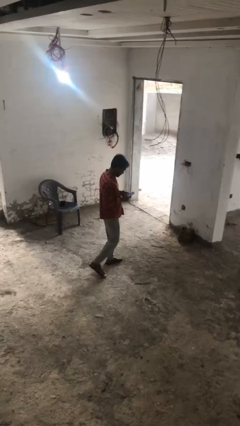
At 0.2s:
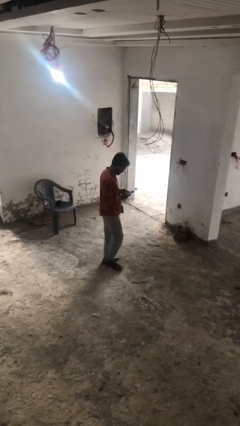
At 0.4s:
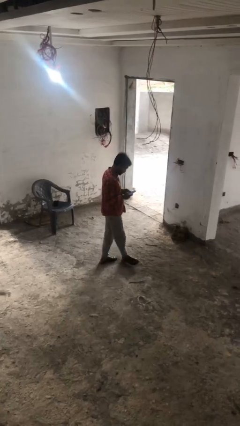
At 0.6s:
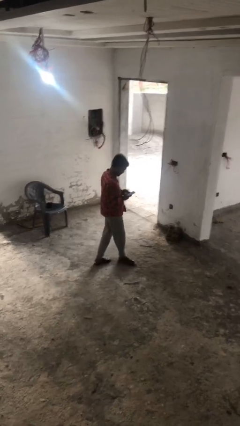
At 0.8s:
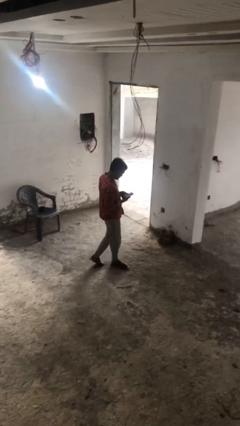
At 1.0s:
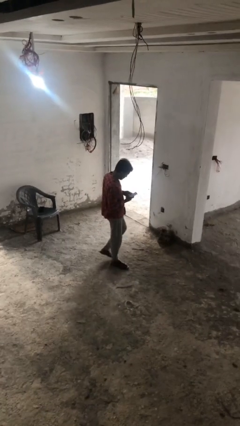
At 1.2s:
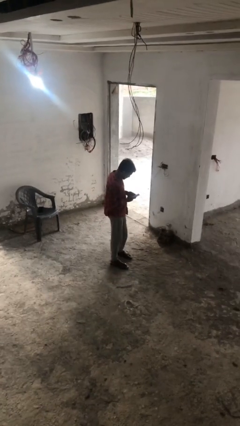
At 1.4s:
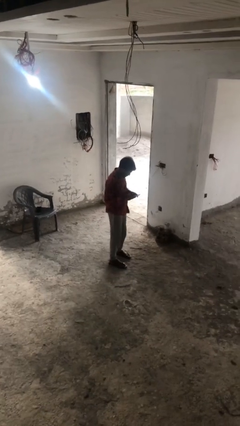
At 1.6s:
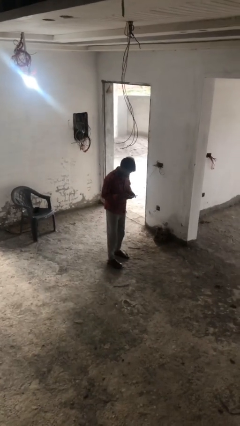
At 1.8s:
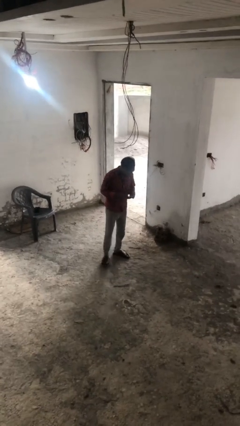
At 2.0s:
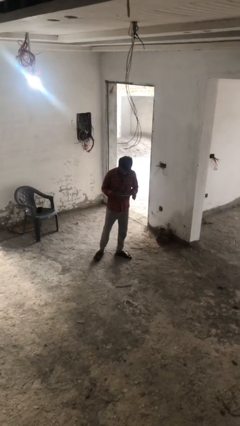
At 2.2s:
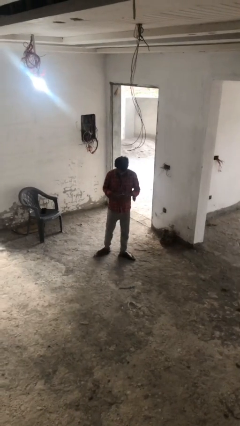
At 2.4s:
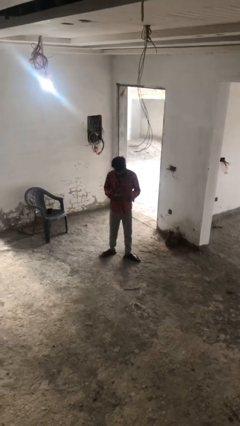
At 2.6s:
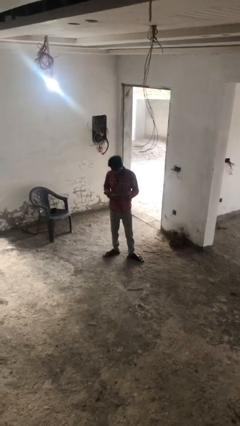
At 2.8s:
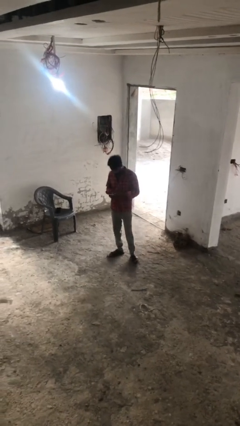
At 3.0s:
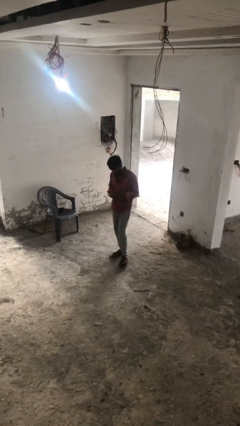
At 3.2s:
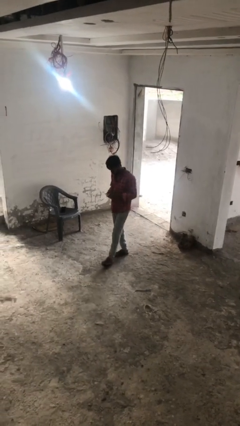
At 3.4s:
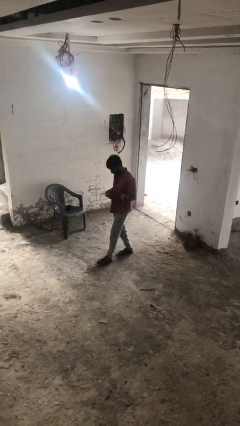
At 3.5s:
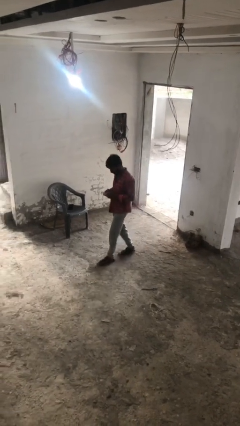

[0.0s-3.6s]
person texts on phone

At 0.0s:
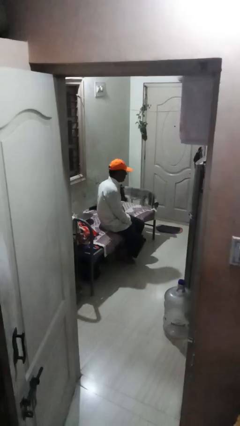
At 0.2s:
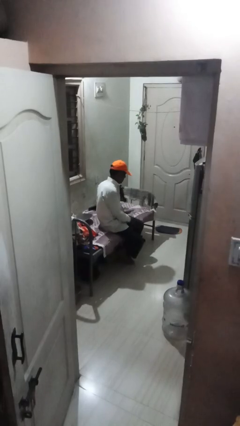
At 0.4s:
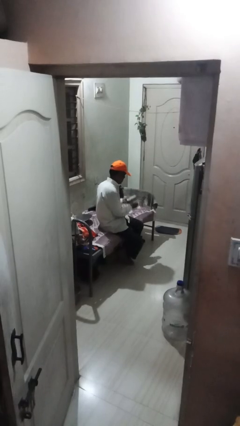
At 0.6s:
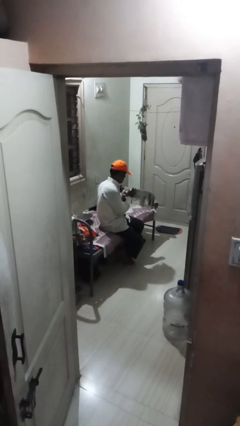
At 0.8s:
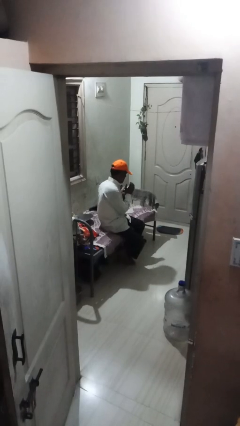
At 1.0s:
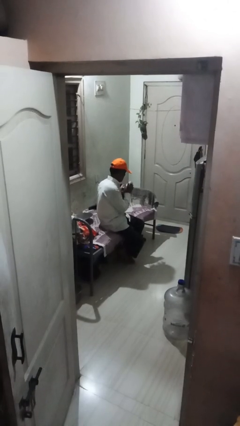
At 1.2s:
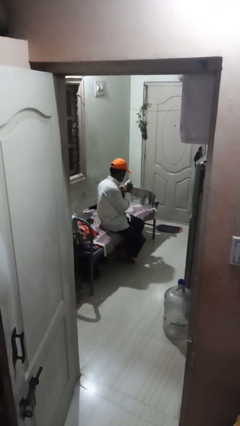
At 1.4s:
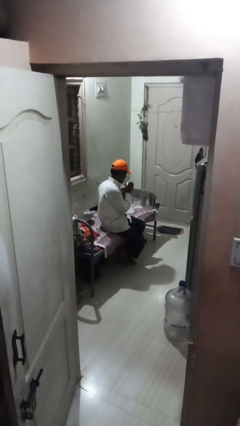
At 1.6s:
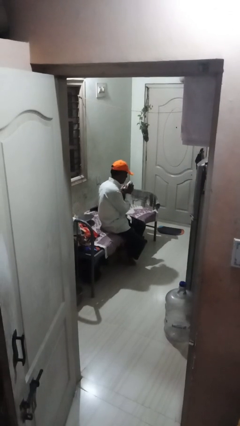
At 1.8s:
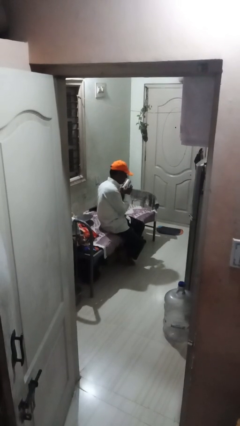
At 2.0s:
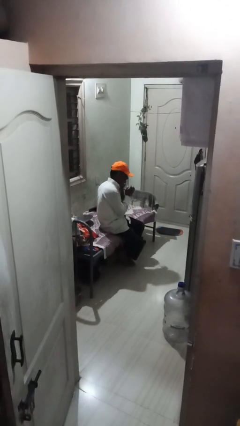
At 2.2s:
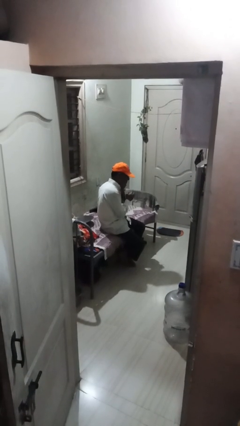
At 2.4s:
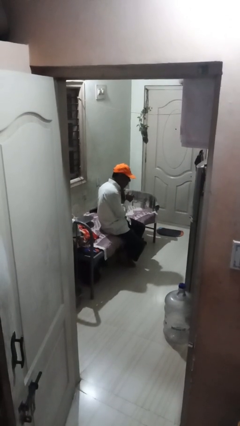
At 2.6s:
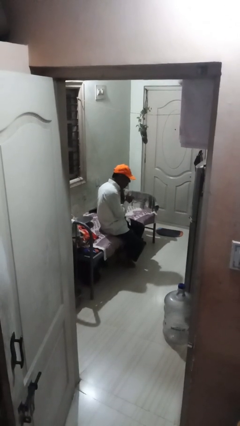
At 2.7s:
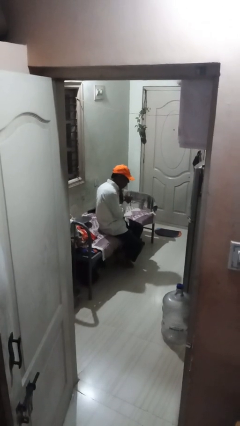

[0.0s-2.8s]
person taps object with finger

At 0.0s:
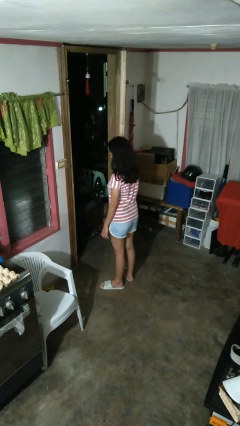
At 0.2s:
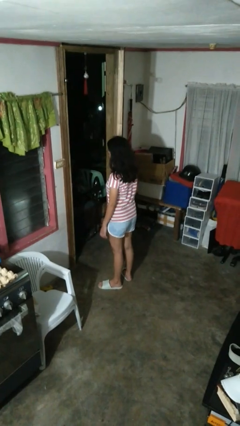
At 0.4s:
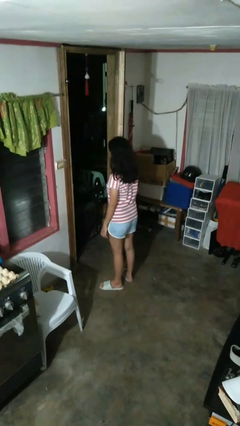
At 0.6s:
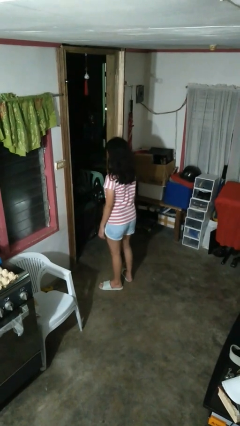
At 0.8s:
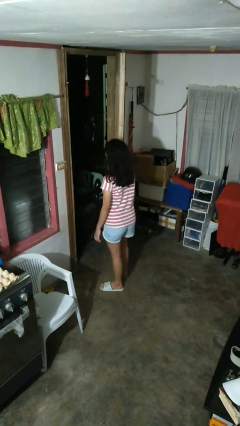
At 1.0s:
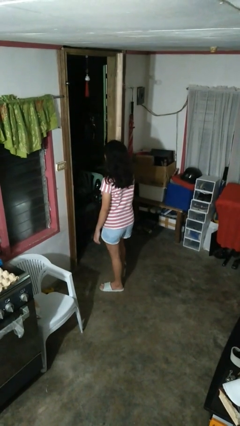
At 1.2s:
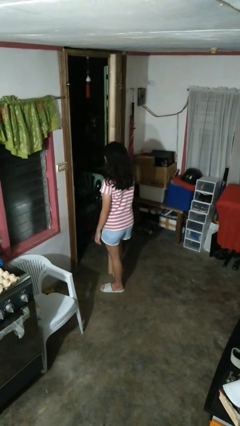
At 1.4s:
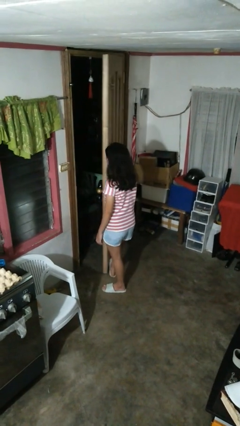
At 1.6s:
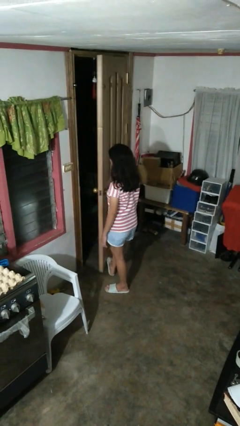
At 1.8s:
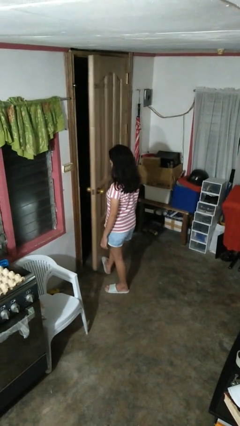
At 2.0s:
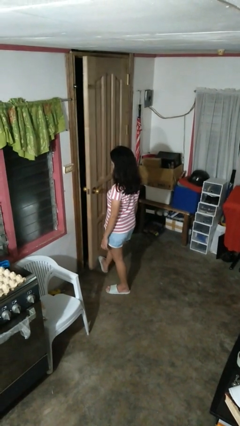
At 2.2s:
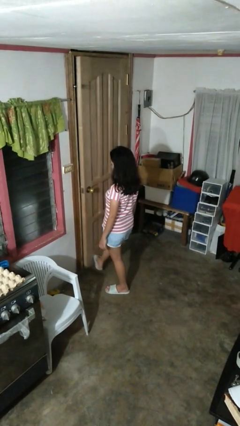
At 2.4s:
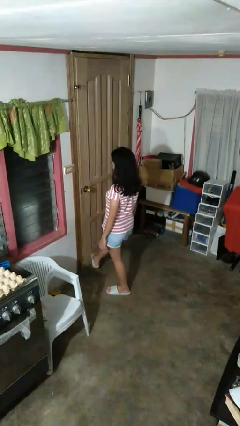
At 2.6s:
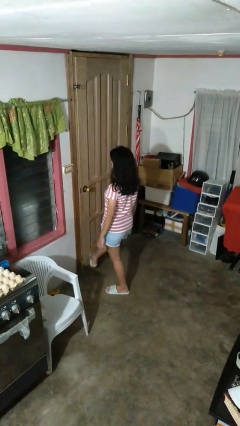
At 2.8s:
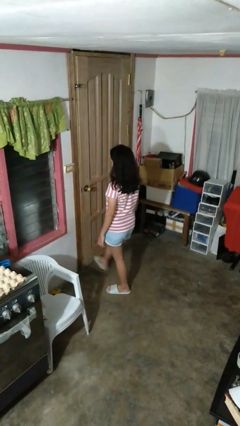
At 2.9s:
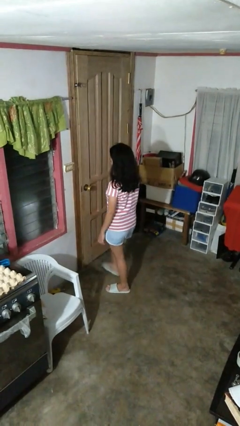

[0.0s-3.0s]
person closes door with foot

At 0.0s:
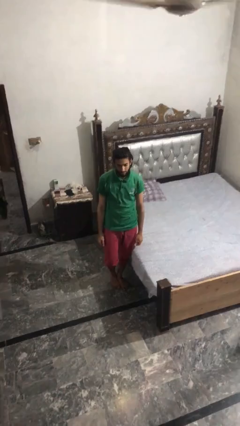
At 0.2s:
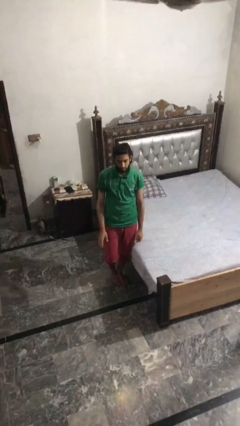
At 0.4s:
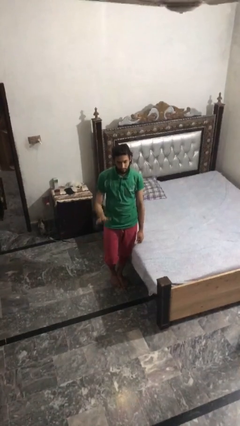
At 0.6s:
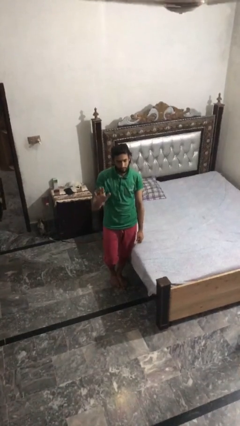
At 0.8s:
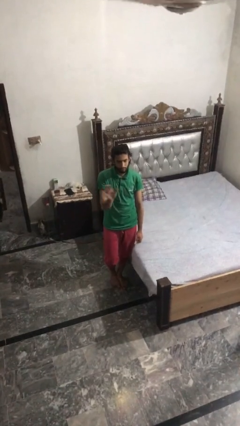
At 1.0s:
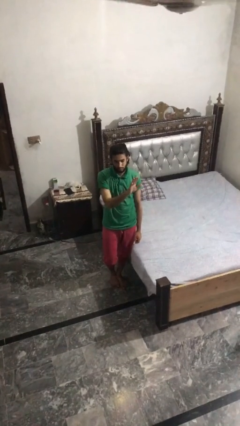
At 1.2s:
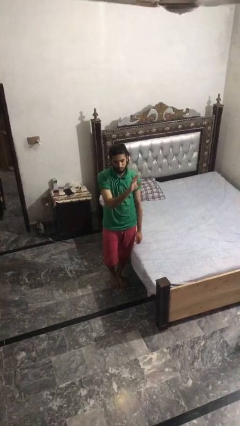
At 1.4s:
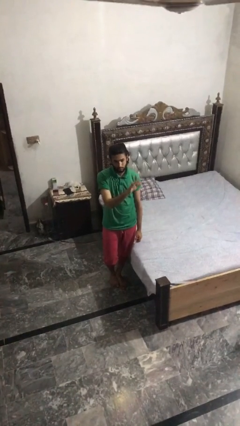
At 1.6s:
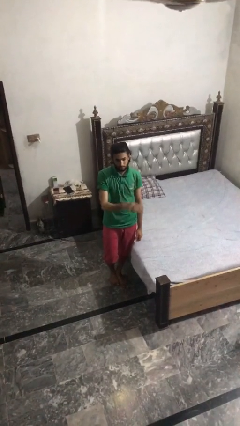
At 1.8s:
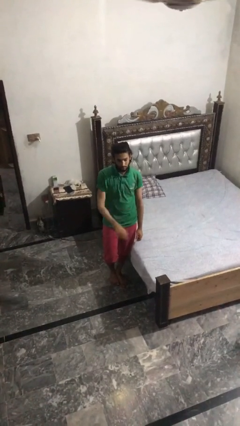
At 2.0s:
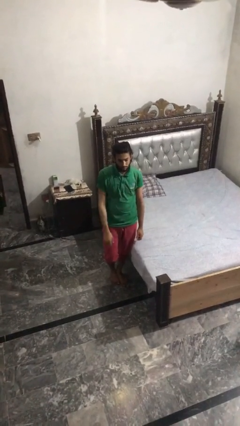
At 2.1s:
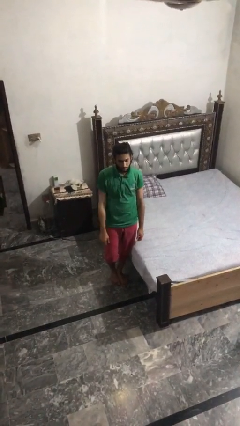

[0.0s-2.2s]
person gestures swipe left

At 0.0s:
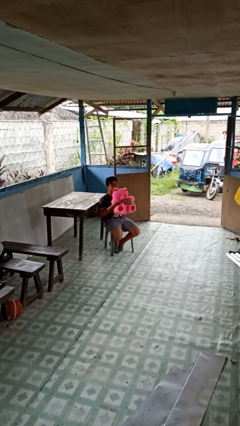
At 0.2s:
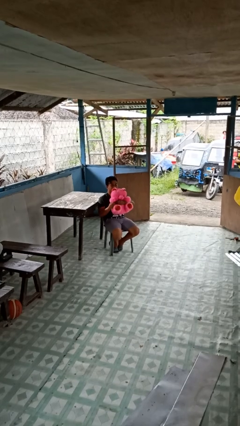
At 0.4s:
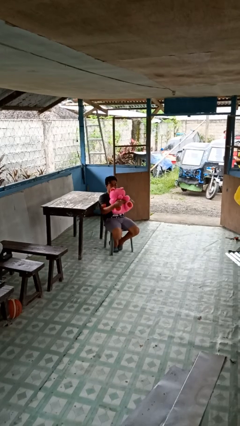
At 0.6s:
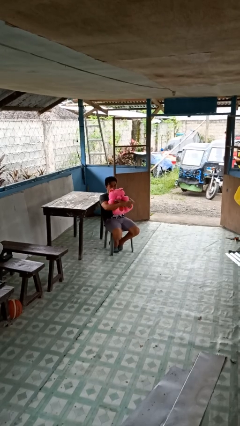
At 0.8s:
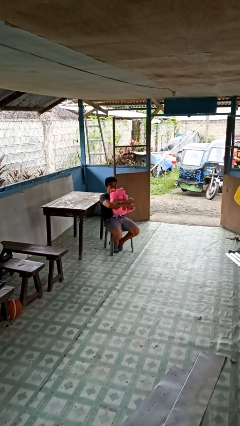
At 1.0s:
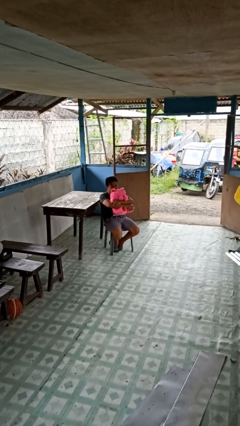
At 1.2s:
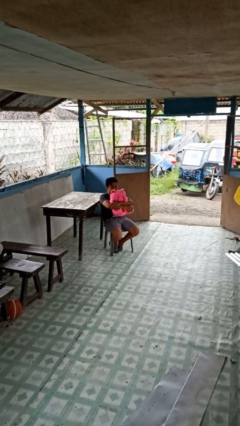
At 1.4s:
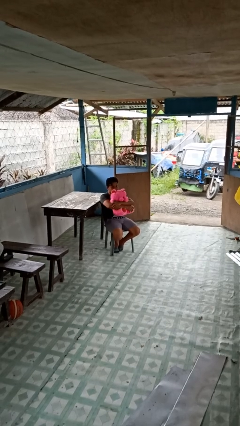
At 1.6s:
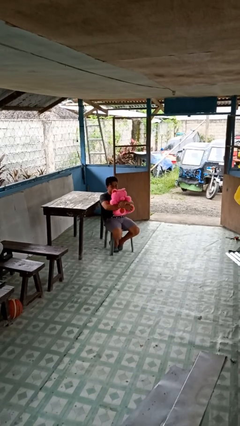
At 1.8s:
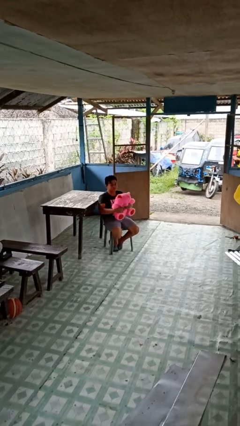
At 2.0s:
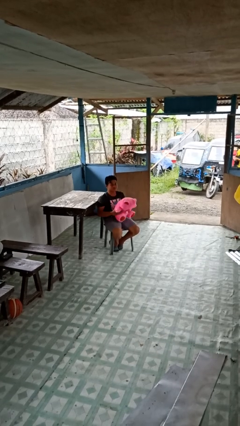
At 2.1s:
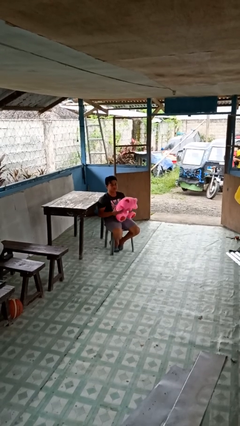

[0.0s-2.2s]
person hugs stuffed animal

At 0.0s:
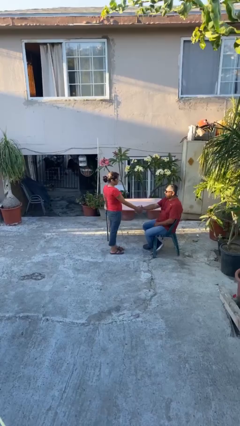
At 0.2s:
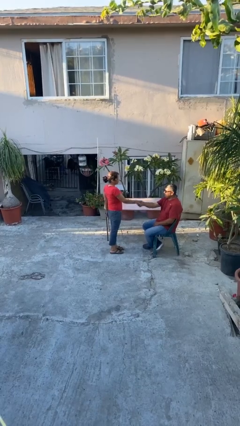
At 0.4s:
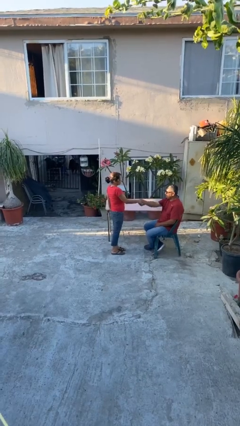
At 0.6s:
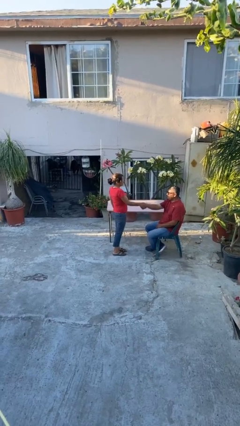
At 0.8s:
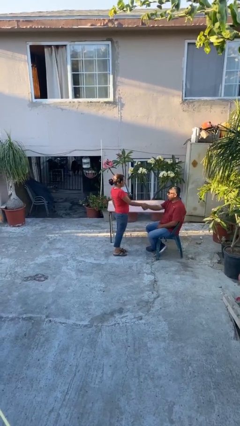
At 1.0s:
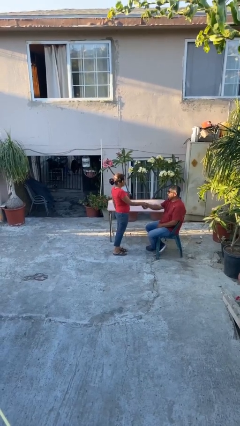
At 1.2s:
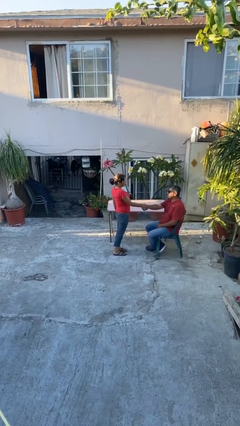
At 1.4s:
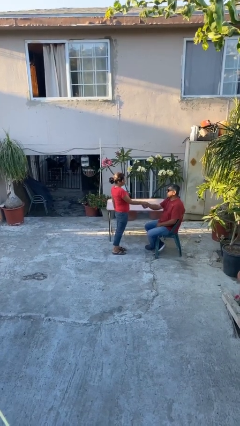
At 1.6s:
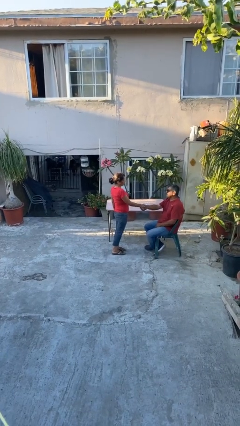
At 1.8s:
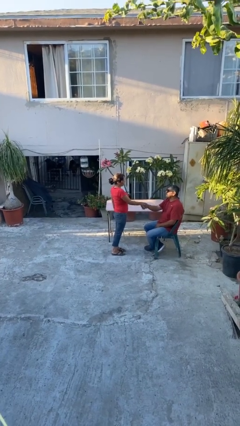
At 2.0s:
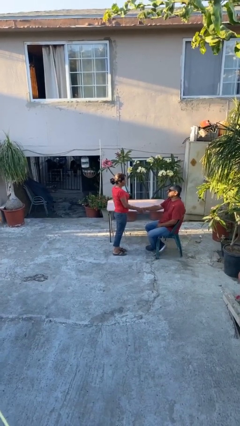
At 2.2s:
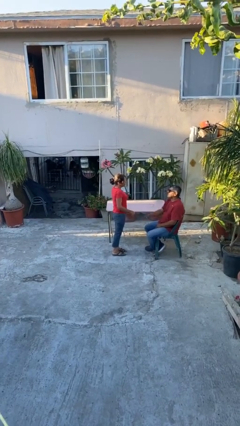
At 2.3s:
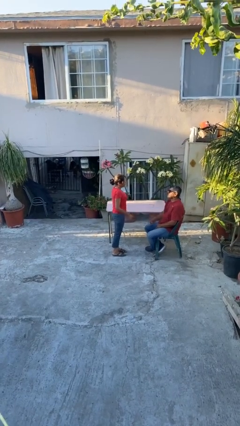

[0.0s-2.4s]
person shakes hand

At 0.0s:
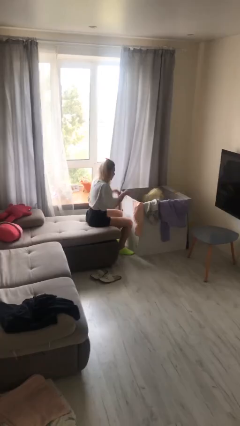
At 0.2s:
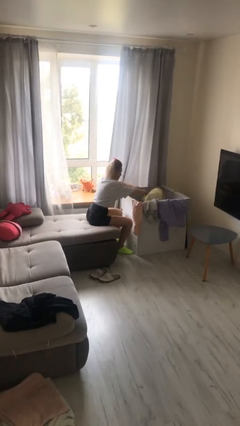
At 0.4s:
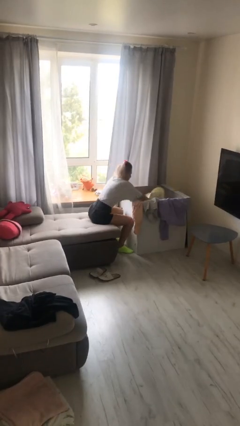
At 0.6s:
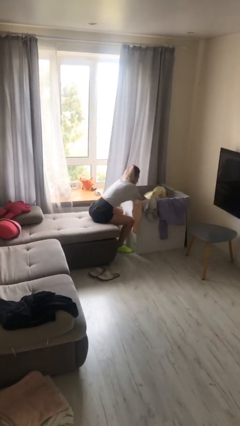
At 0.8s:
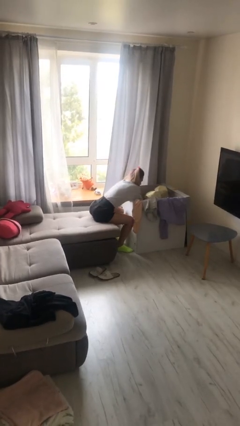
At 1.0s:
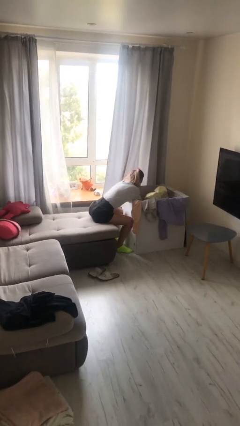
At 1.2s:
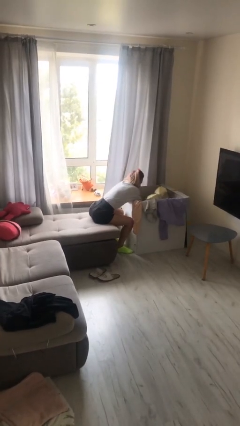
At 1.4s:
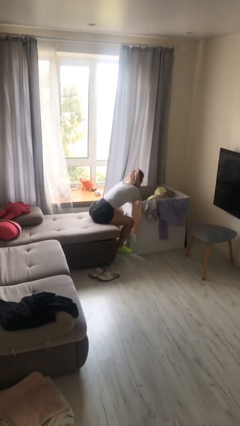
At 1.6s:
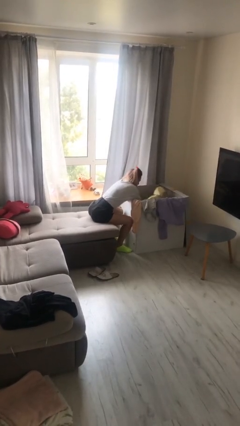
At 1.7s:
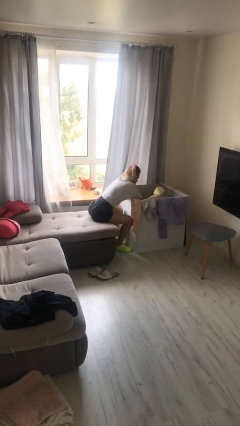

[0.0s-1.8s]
person searches in box
